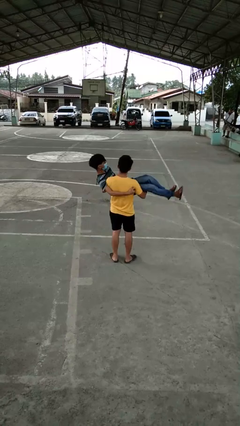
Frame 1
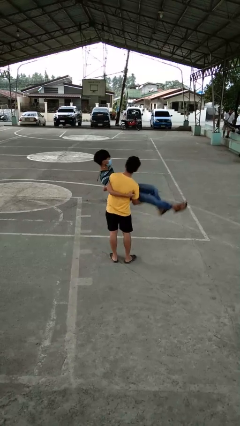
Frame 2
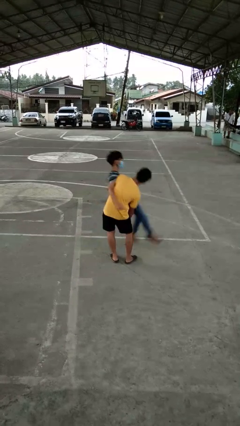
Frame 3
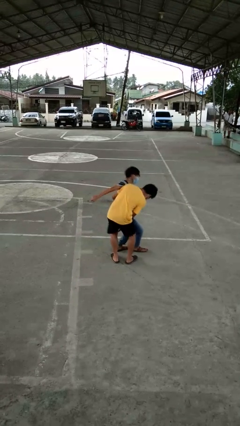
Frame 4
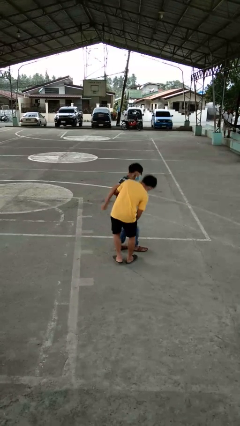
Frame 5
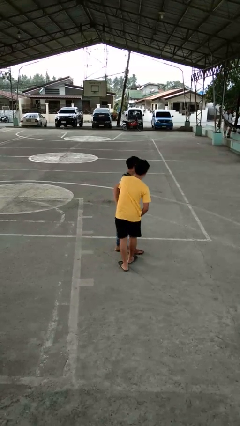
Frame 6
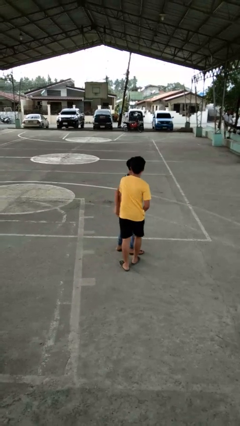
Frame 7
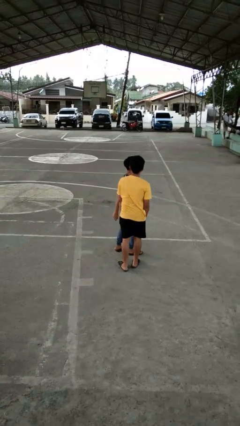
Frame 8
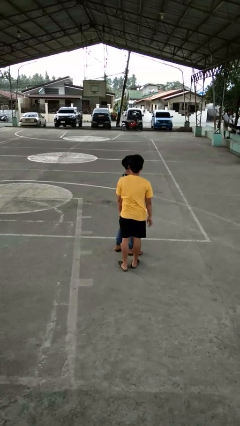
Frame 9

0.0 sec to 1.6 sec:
person puts down person

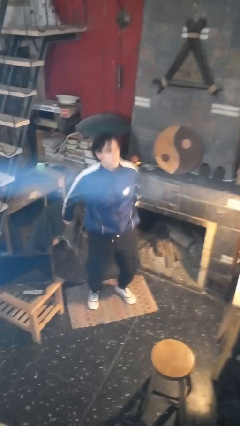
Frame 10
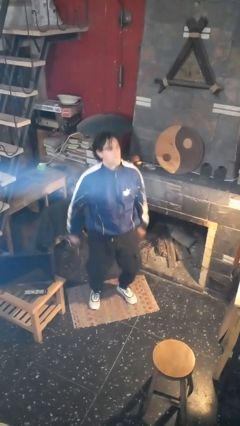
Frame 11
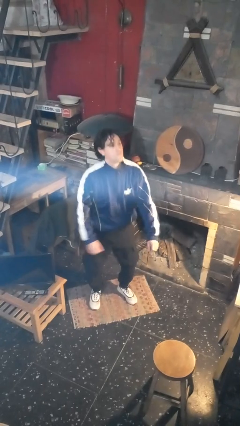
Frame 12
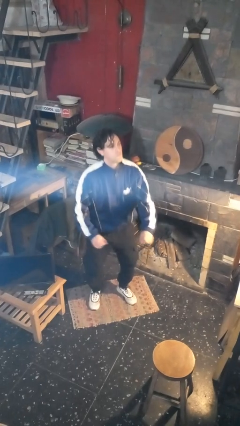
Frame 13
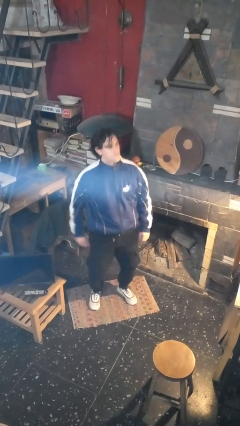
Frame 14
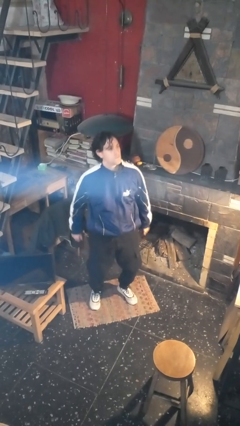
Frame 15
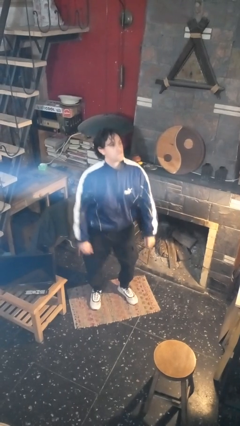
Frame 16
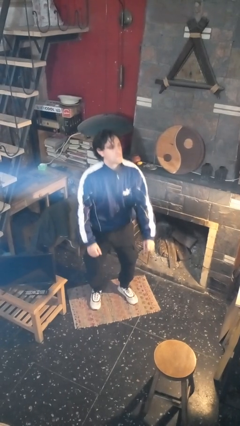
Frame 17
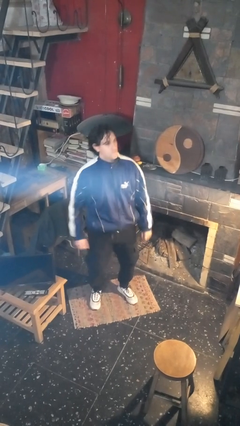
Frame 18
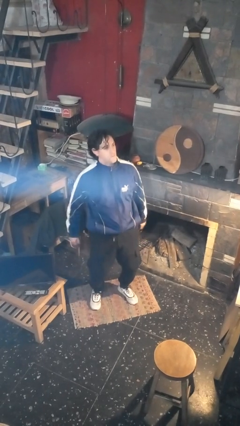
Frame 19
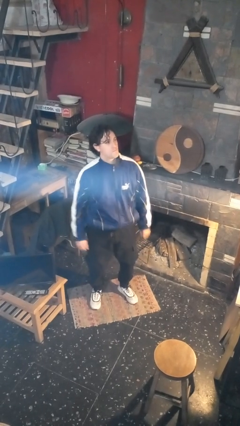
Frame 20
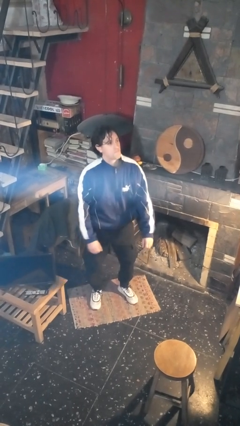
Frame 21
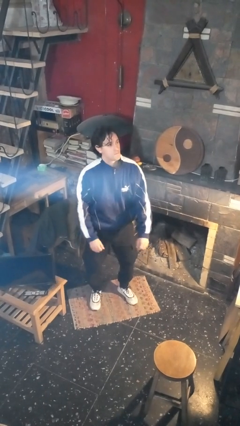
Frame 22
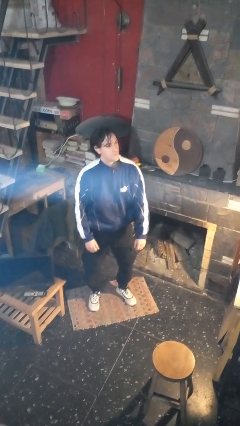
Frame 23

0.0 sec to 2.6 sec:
person wiggles hips

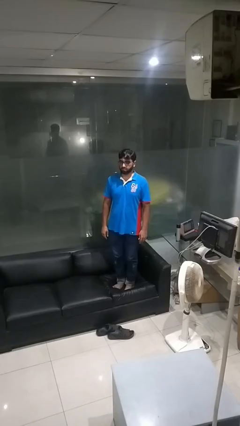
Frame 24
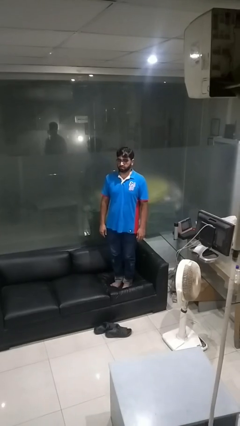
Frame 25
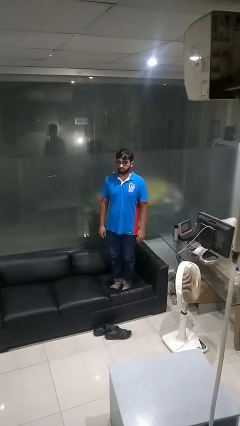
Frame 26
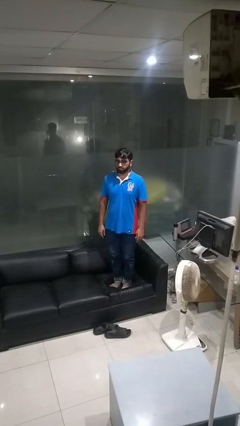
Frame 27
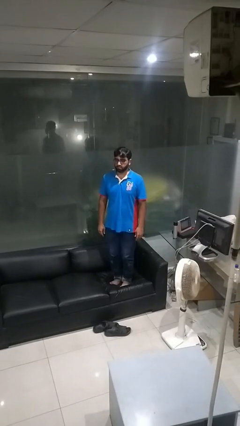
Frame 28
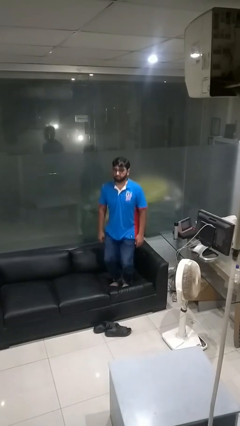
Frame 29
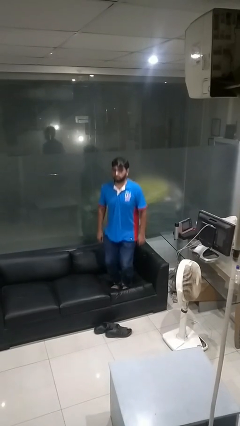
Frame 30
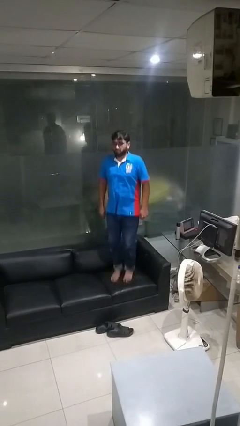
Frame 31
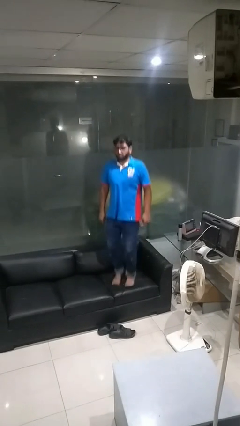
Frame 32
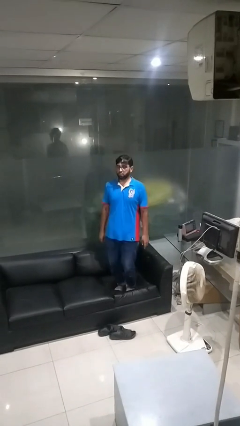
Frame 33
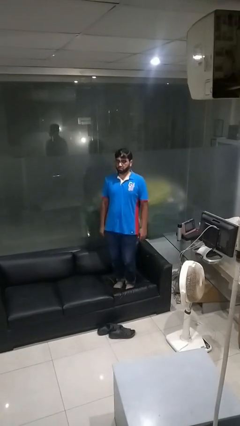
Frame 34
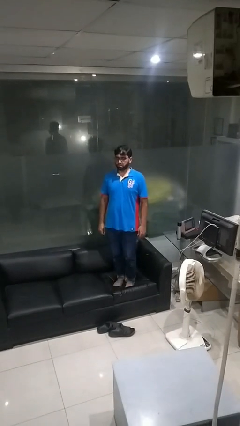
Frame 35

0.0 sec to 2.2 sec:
person jumps on couch

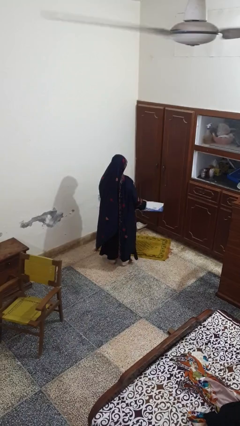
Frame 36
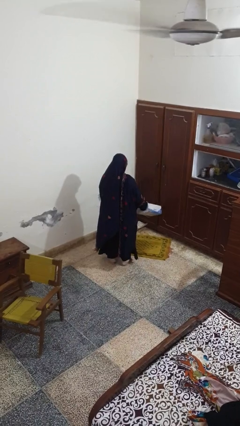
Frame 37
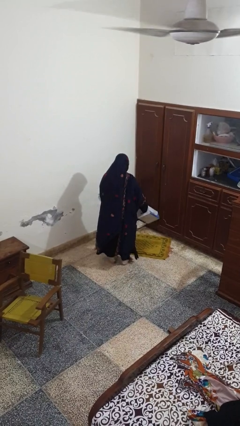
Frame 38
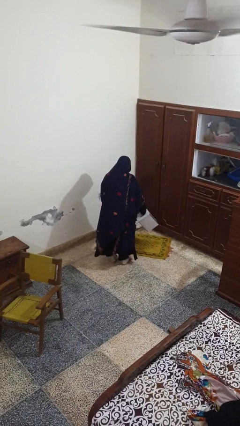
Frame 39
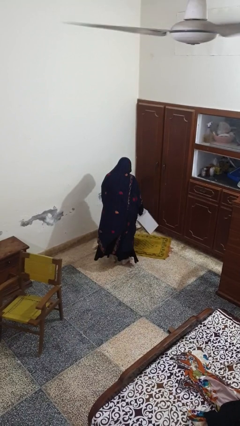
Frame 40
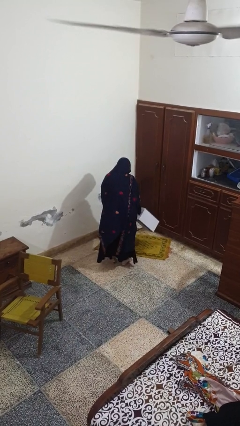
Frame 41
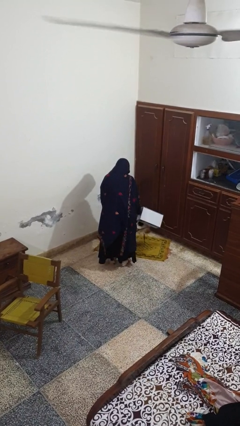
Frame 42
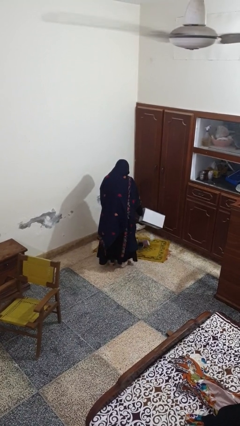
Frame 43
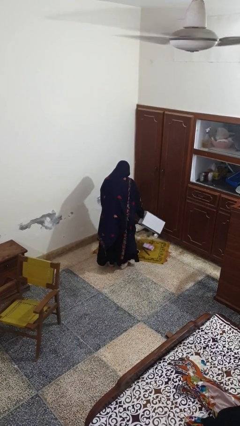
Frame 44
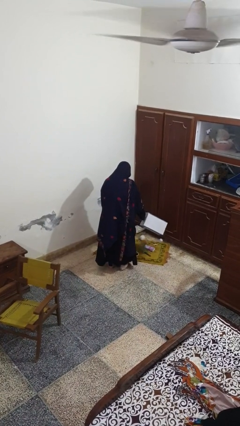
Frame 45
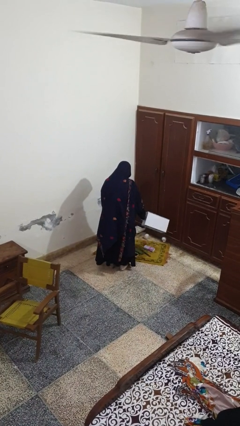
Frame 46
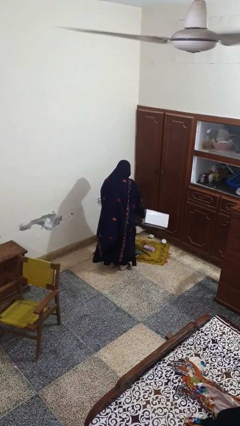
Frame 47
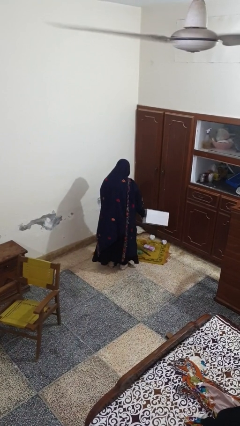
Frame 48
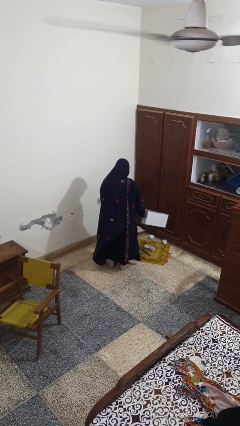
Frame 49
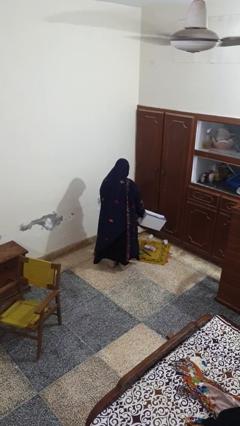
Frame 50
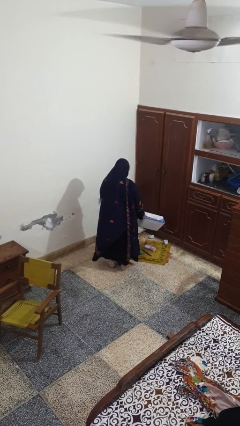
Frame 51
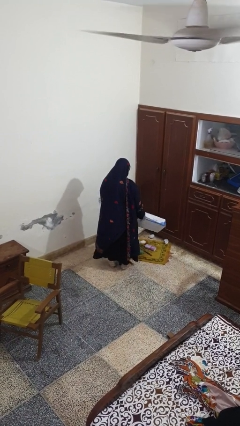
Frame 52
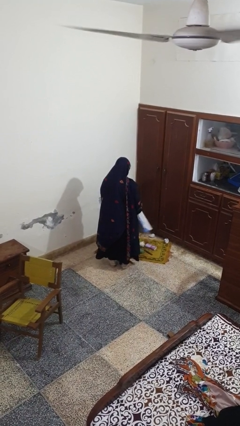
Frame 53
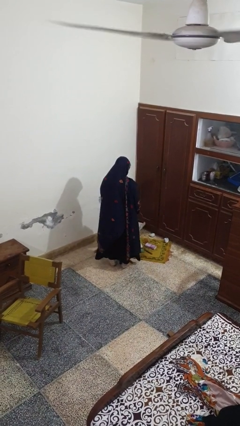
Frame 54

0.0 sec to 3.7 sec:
person unloads box onto floor

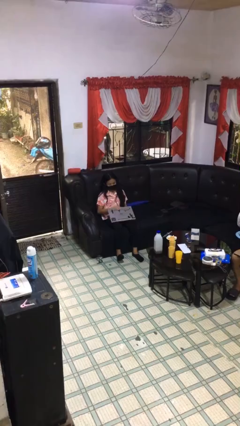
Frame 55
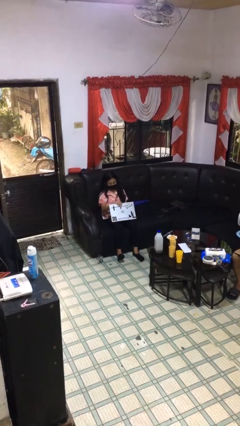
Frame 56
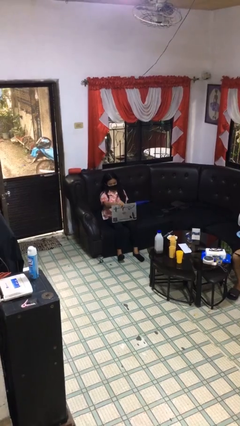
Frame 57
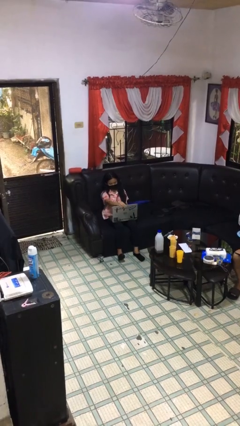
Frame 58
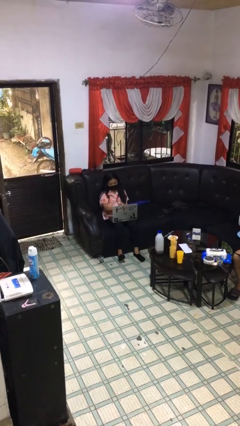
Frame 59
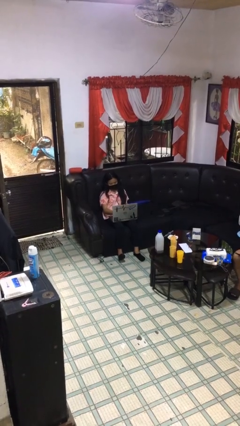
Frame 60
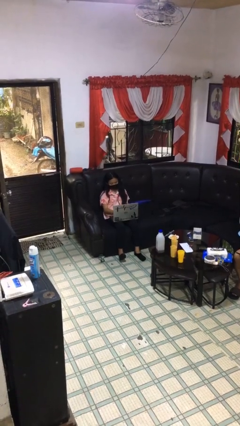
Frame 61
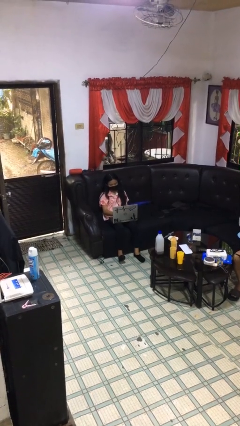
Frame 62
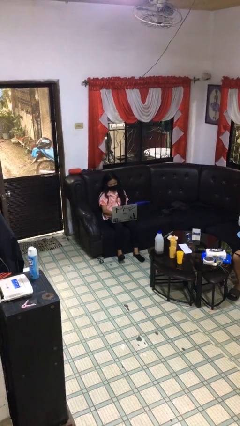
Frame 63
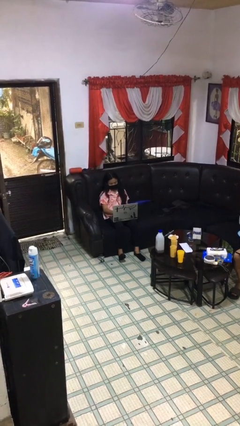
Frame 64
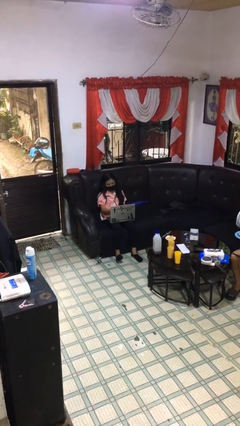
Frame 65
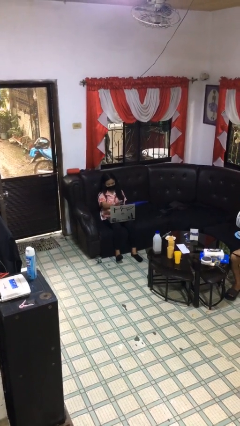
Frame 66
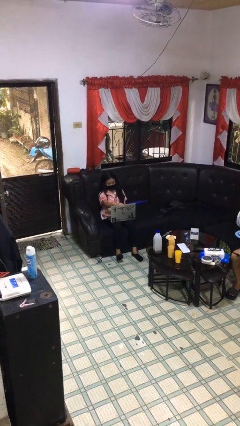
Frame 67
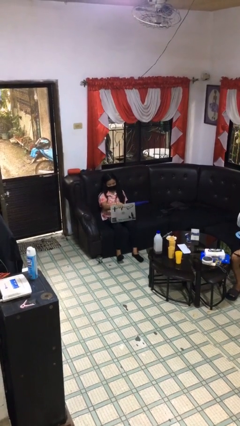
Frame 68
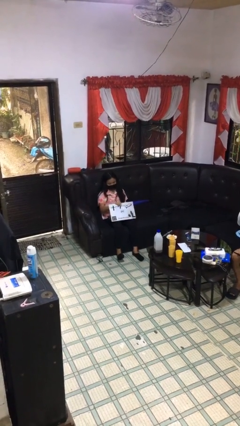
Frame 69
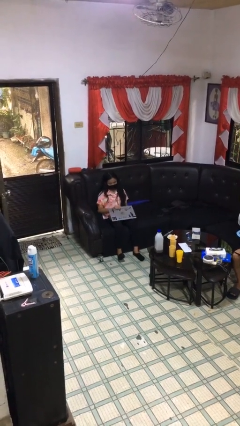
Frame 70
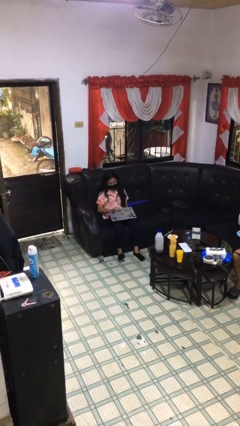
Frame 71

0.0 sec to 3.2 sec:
person interacts with laptop

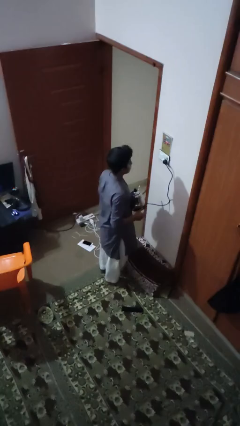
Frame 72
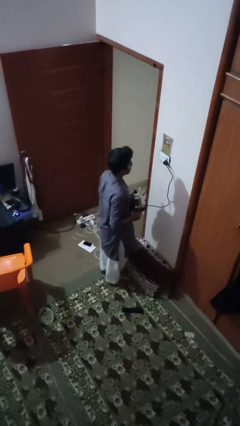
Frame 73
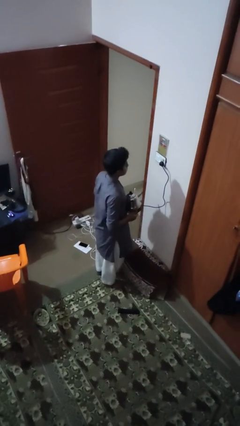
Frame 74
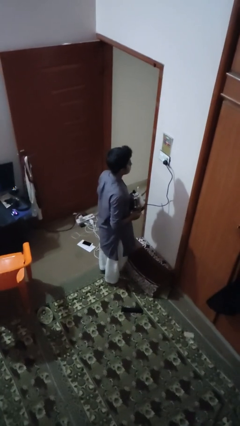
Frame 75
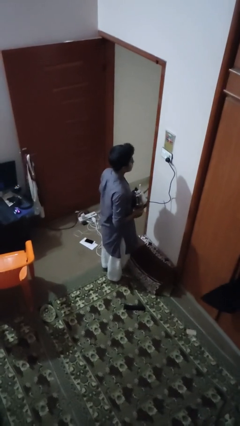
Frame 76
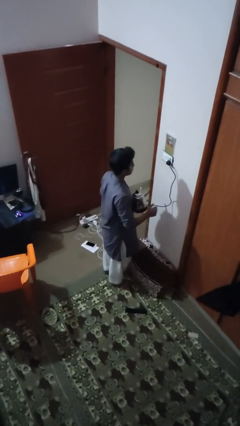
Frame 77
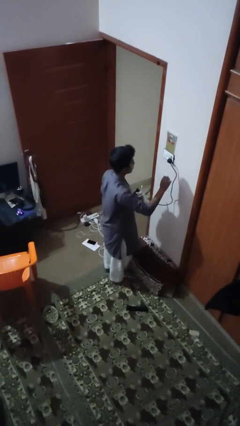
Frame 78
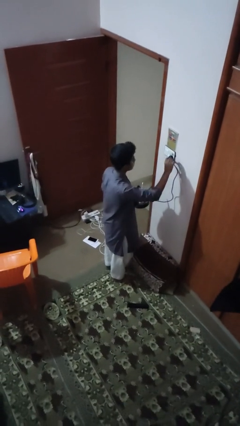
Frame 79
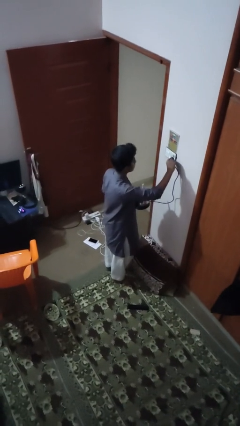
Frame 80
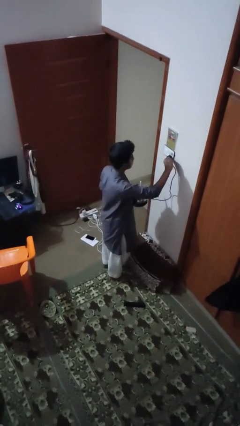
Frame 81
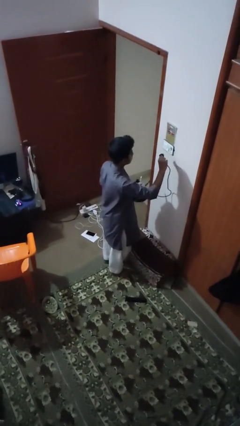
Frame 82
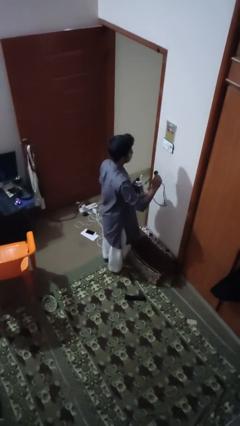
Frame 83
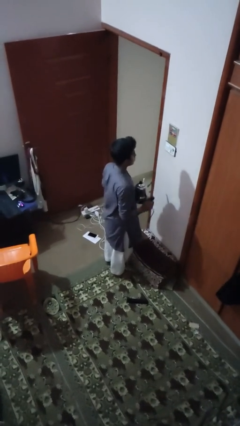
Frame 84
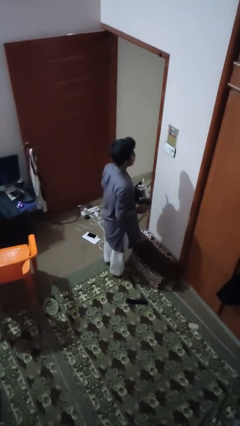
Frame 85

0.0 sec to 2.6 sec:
person unplugs from electrical socket

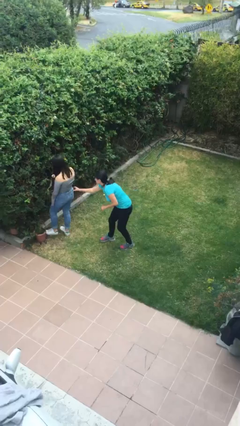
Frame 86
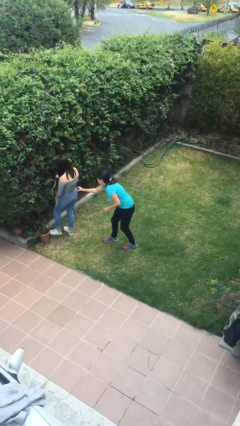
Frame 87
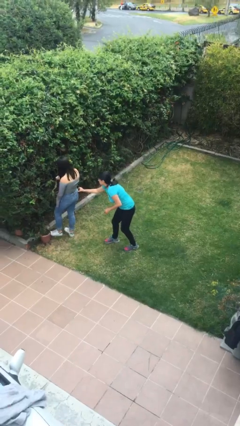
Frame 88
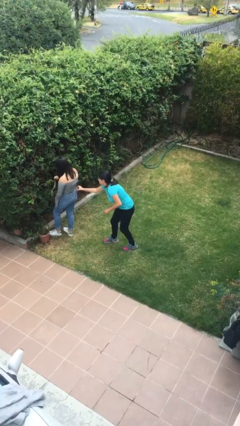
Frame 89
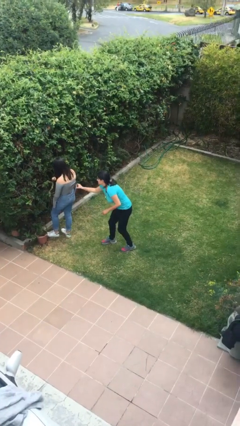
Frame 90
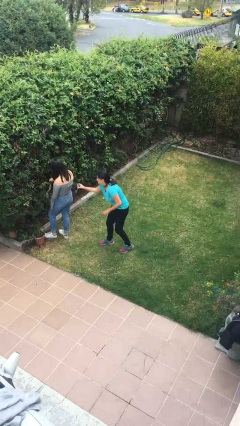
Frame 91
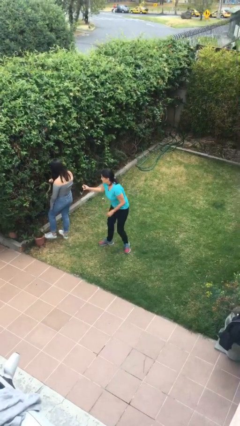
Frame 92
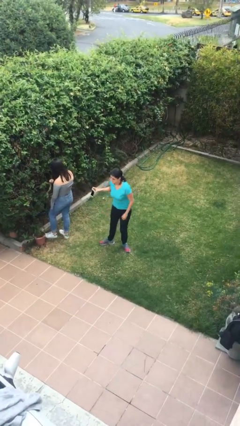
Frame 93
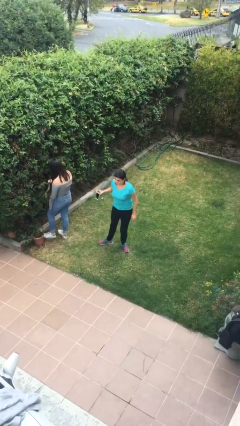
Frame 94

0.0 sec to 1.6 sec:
person steals object from person
